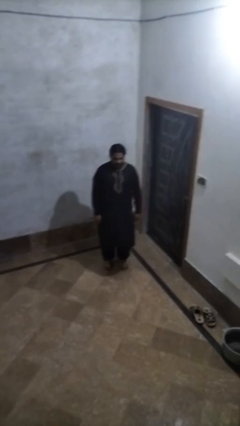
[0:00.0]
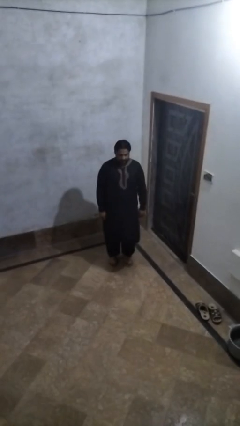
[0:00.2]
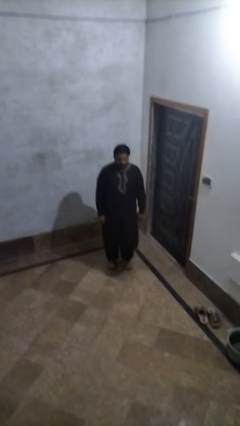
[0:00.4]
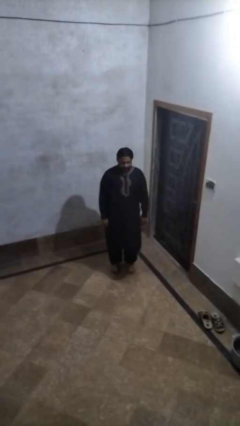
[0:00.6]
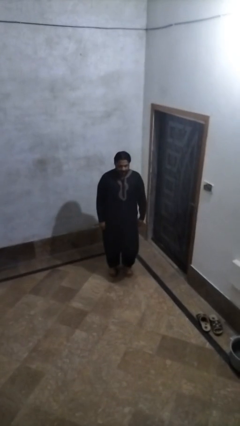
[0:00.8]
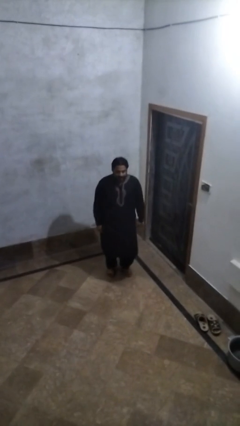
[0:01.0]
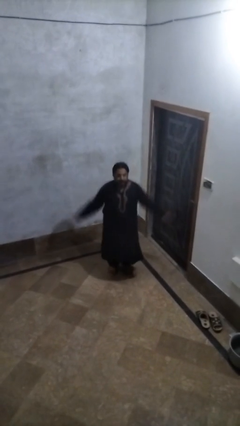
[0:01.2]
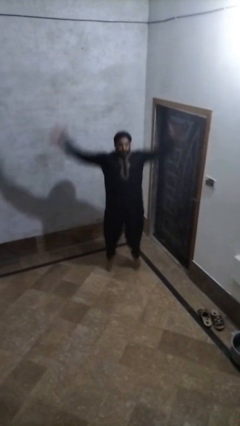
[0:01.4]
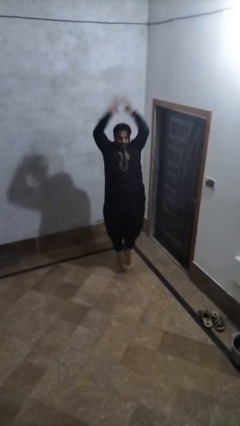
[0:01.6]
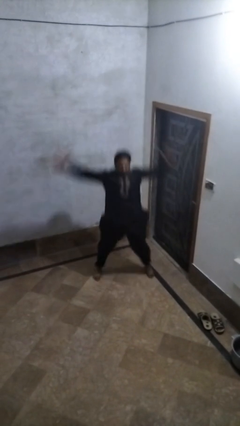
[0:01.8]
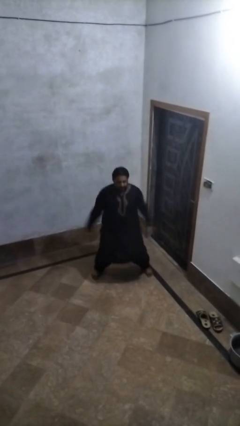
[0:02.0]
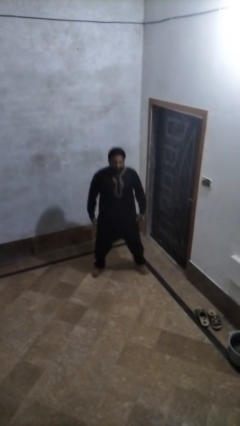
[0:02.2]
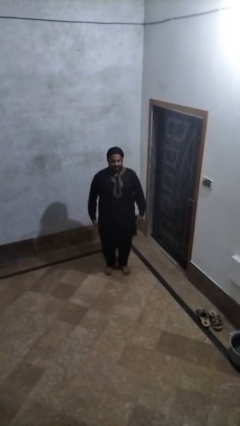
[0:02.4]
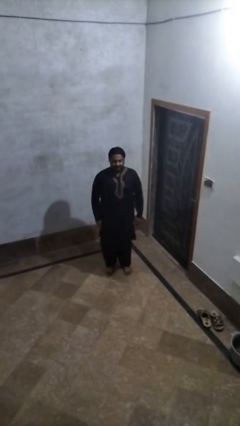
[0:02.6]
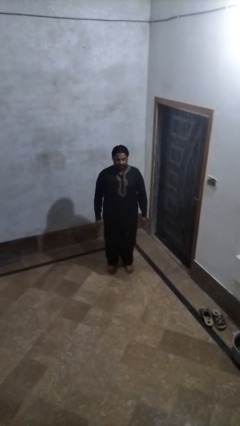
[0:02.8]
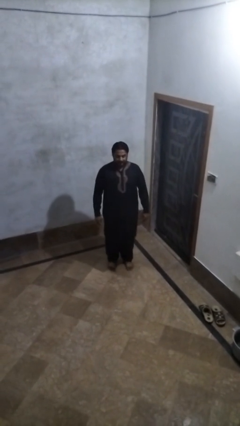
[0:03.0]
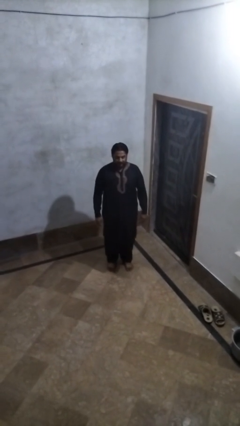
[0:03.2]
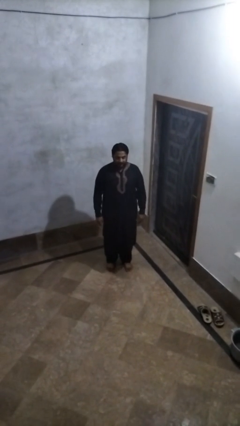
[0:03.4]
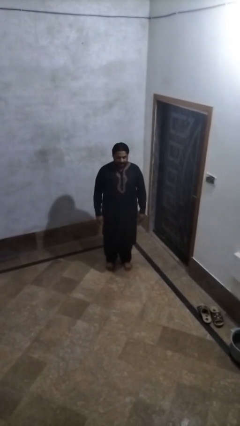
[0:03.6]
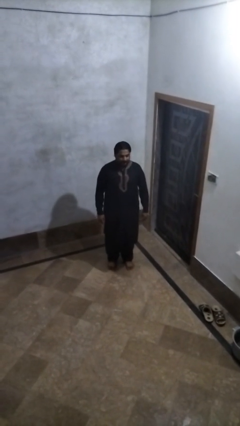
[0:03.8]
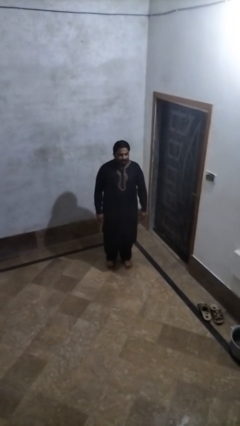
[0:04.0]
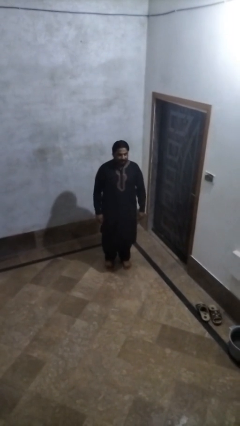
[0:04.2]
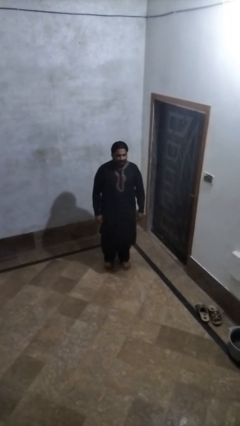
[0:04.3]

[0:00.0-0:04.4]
person exercises with jumping jacks

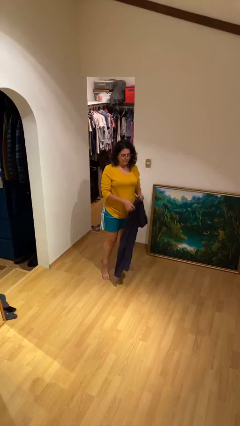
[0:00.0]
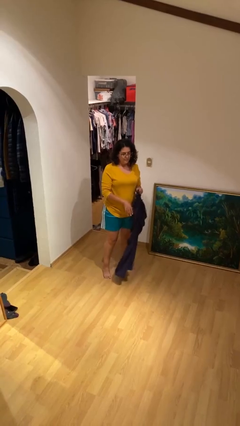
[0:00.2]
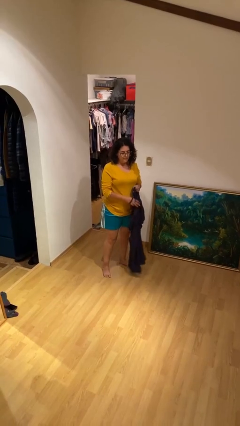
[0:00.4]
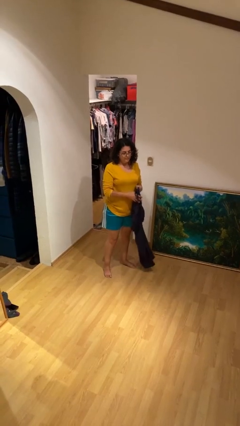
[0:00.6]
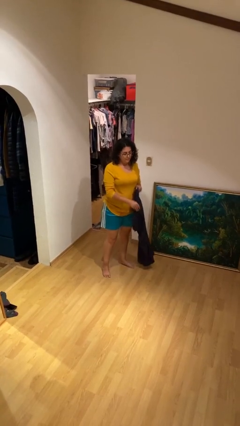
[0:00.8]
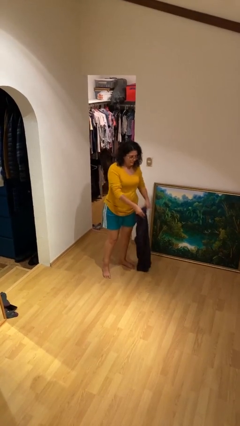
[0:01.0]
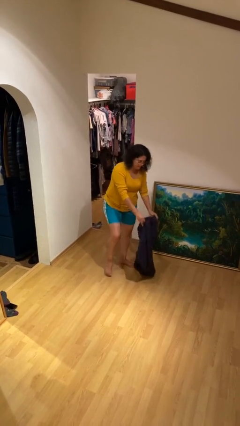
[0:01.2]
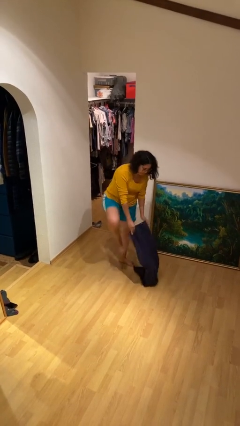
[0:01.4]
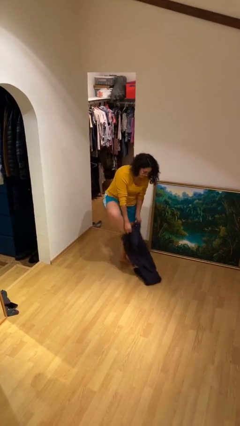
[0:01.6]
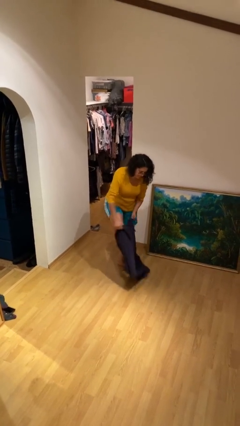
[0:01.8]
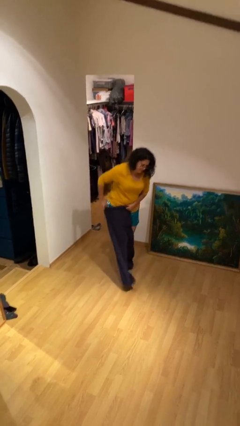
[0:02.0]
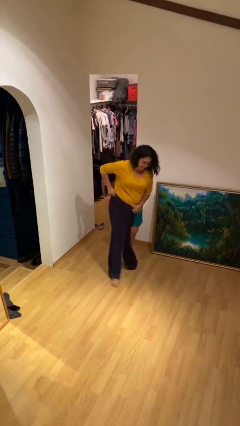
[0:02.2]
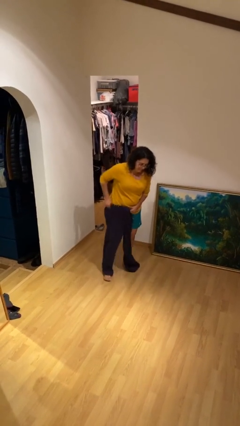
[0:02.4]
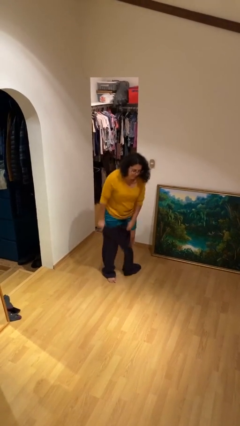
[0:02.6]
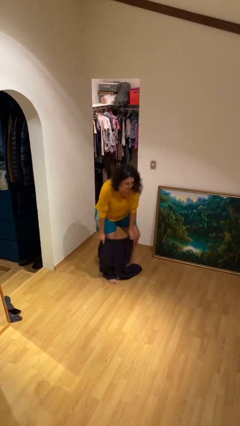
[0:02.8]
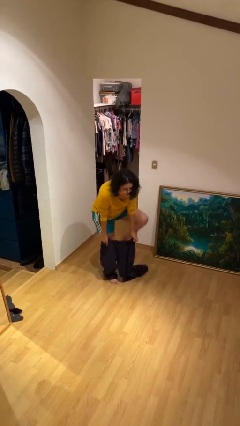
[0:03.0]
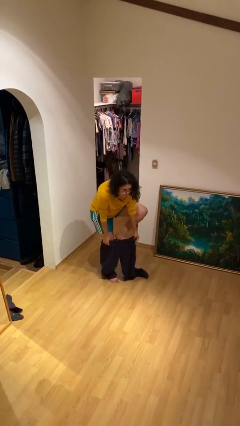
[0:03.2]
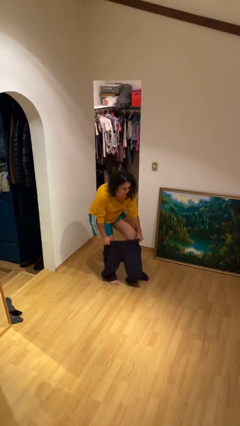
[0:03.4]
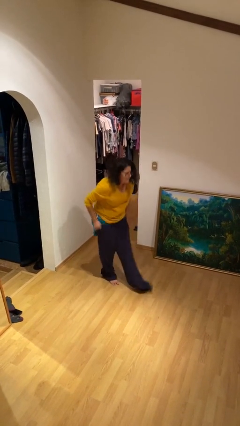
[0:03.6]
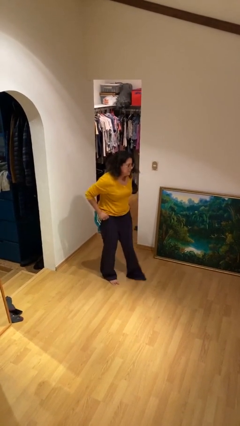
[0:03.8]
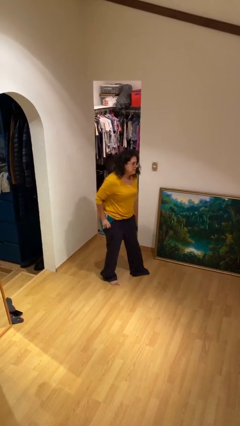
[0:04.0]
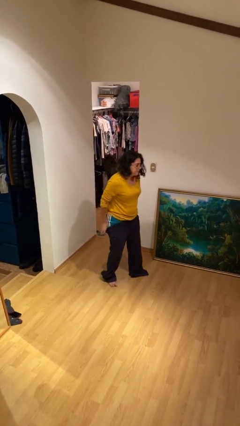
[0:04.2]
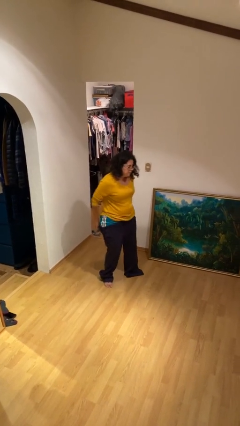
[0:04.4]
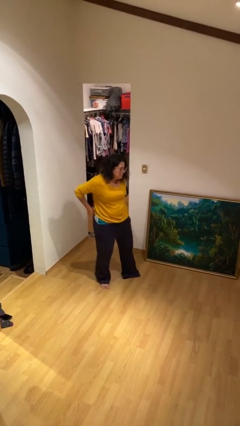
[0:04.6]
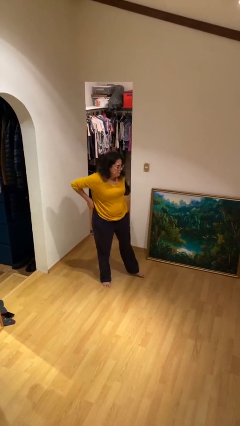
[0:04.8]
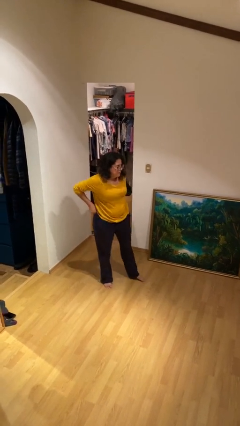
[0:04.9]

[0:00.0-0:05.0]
person puts on pants

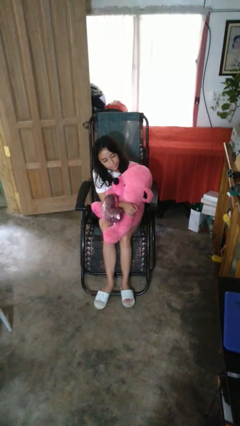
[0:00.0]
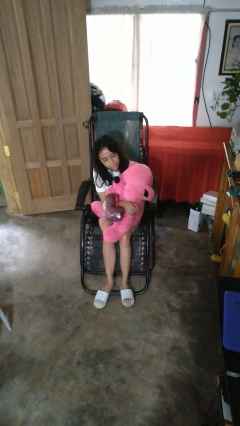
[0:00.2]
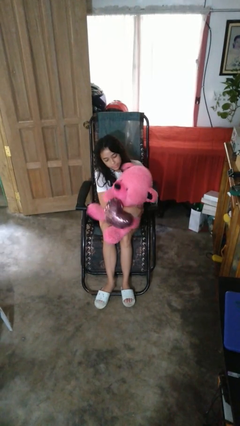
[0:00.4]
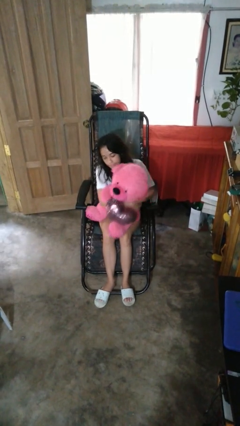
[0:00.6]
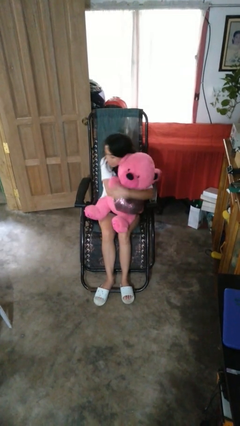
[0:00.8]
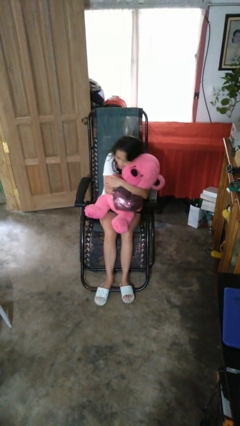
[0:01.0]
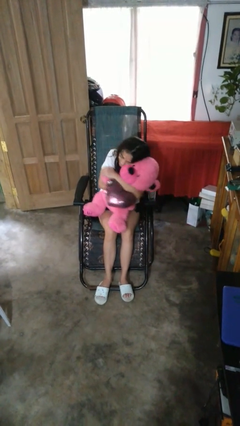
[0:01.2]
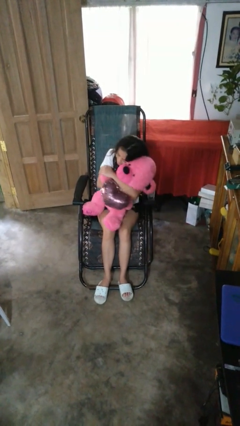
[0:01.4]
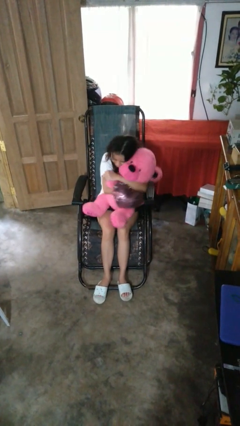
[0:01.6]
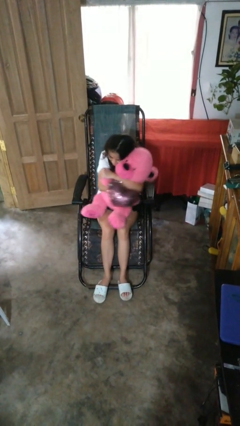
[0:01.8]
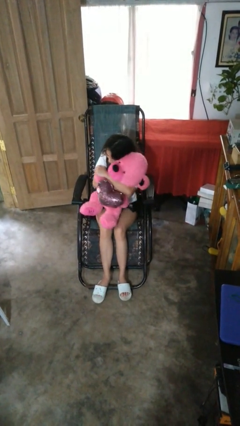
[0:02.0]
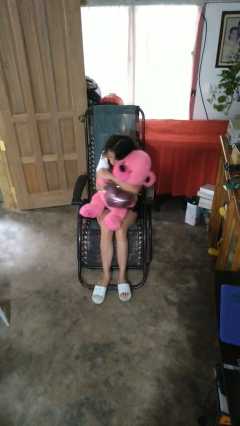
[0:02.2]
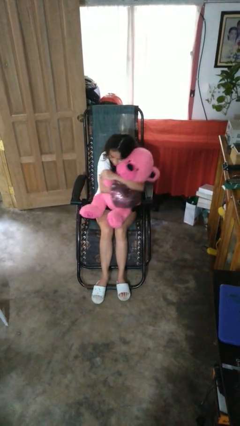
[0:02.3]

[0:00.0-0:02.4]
person hugs stuffed animal

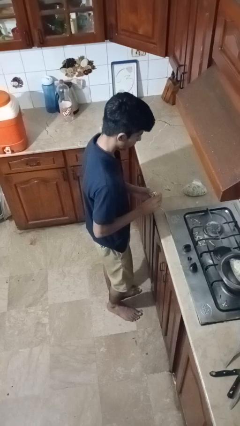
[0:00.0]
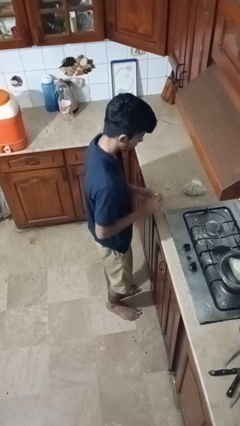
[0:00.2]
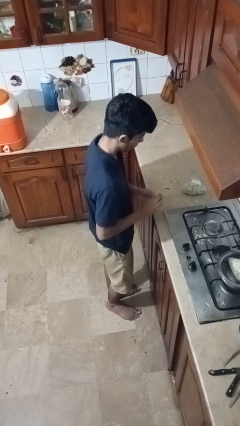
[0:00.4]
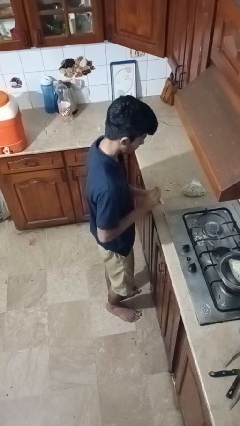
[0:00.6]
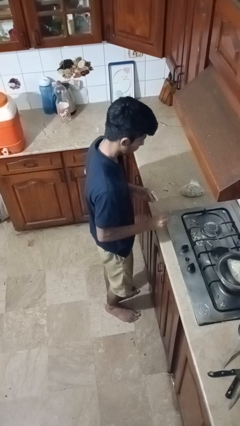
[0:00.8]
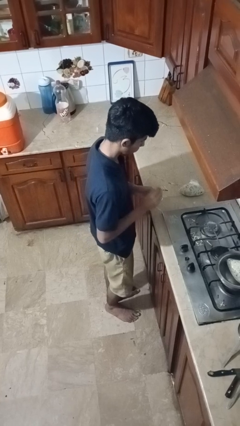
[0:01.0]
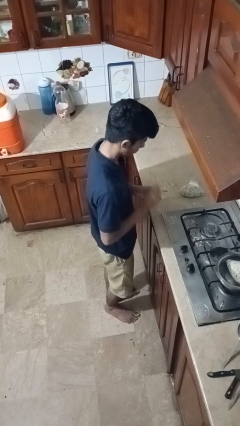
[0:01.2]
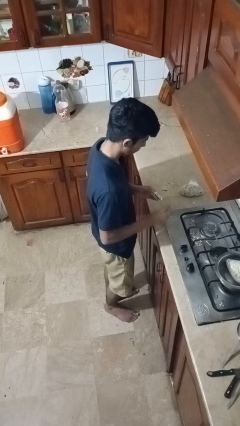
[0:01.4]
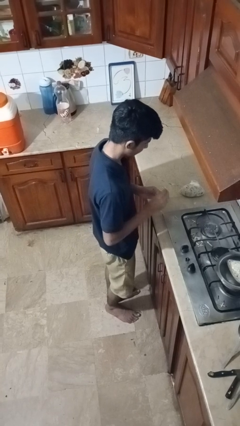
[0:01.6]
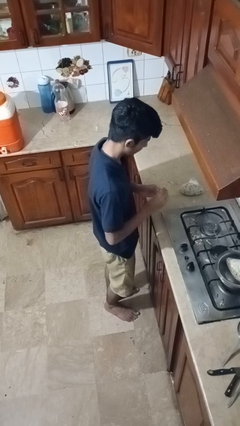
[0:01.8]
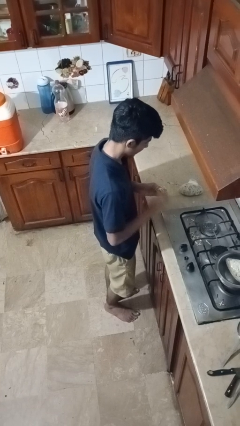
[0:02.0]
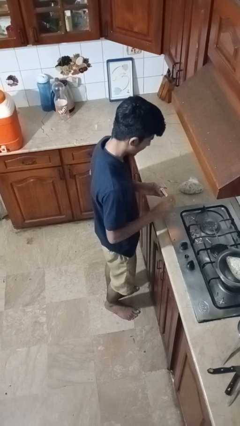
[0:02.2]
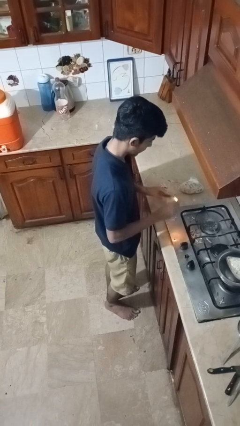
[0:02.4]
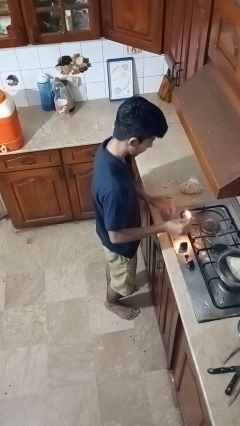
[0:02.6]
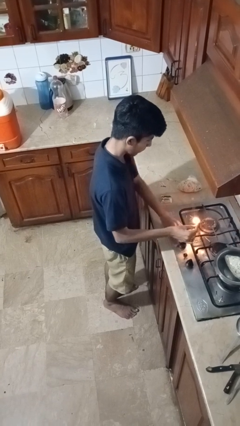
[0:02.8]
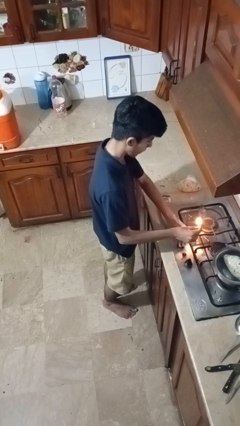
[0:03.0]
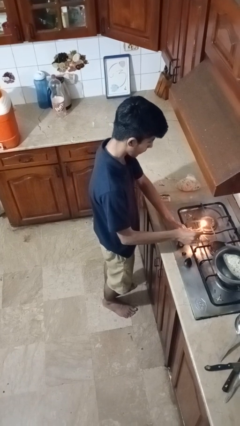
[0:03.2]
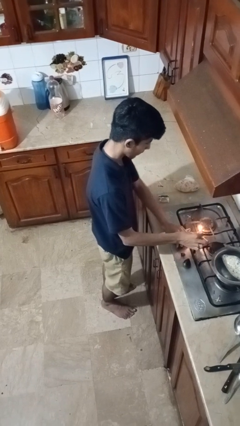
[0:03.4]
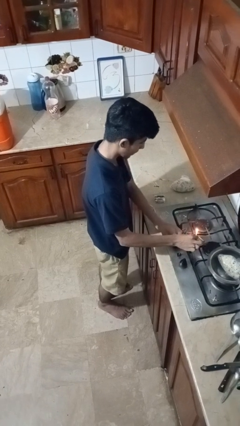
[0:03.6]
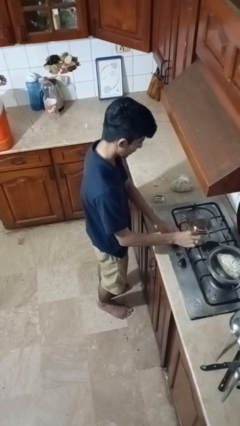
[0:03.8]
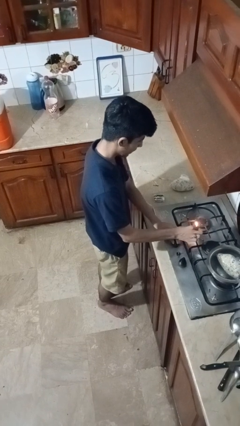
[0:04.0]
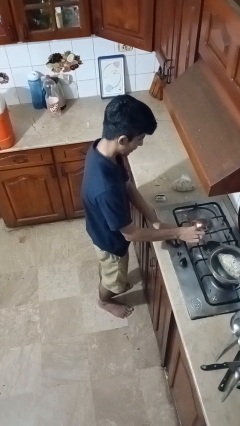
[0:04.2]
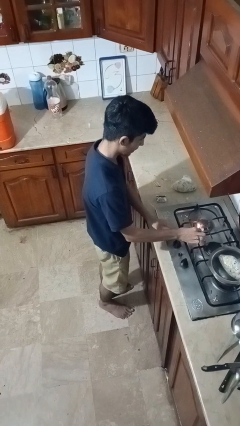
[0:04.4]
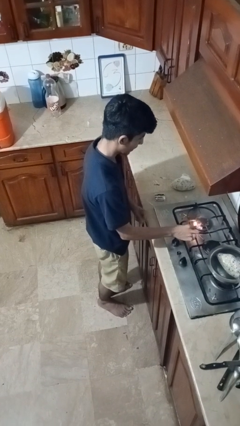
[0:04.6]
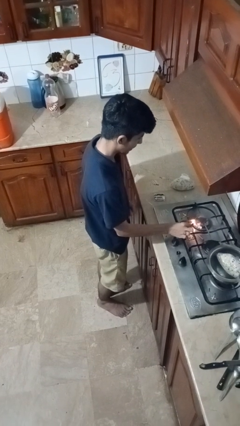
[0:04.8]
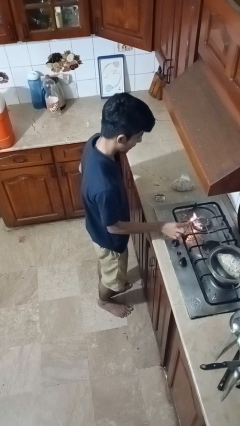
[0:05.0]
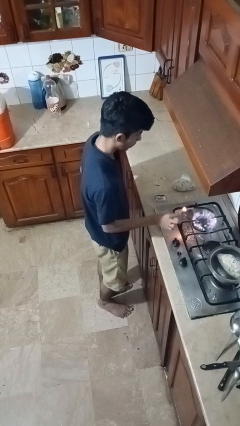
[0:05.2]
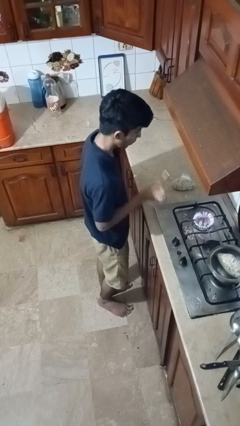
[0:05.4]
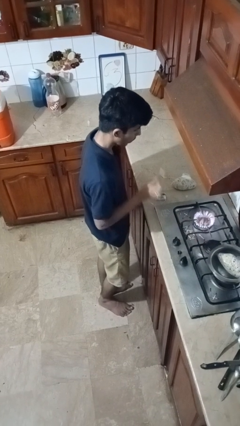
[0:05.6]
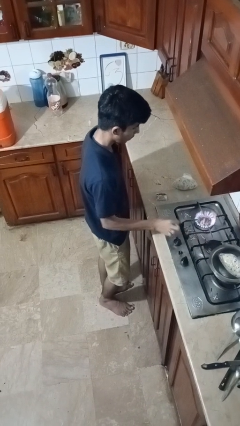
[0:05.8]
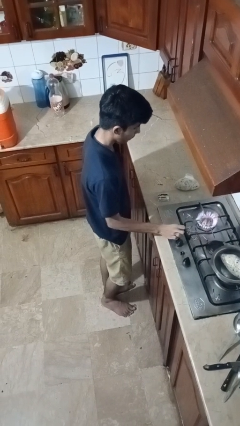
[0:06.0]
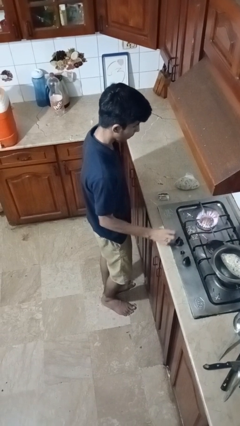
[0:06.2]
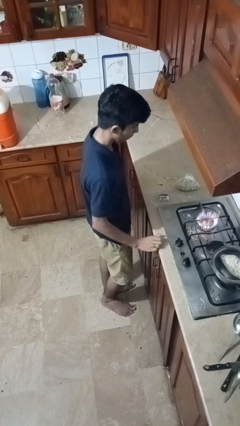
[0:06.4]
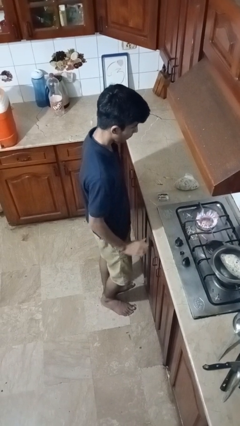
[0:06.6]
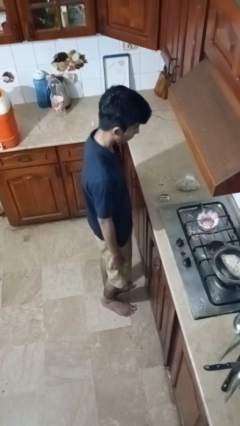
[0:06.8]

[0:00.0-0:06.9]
person turns on stovetop
